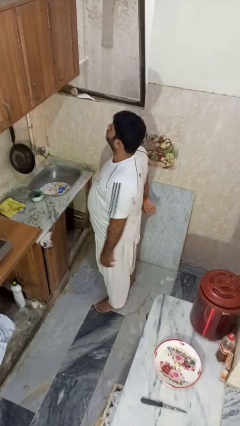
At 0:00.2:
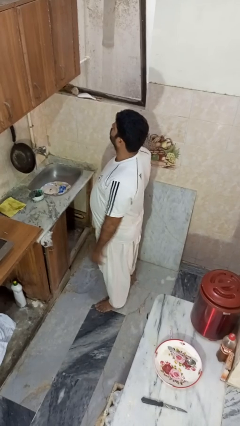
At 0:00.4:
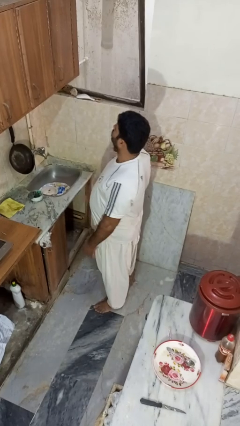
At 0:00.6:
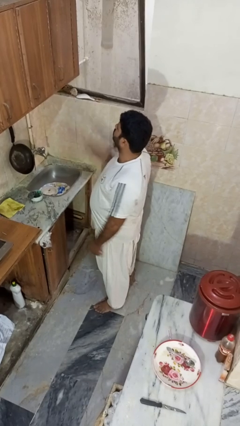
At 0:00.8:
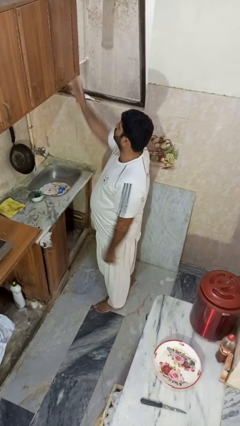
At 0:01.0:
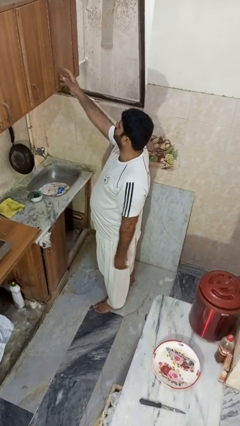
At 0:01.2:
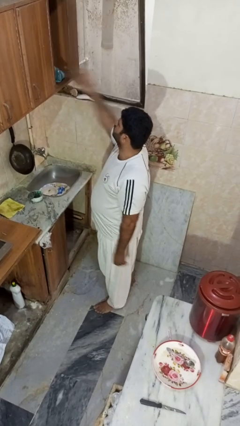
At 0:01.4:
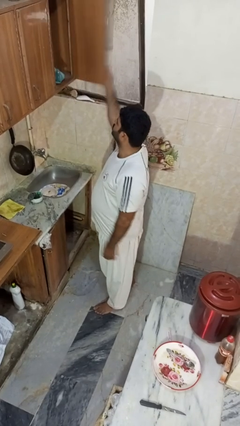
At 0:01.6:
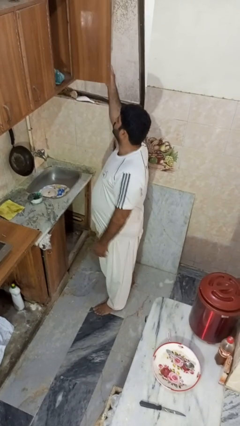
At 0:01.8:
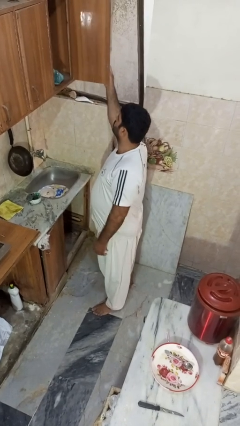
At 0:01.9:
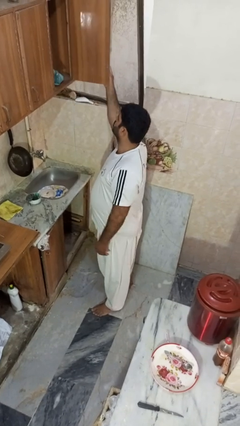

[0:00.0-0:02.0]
person opens cabinet

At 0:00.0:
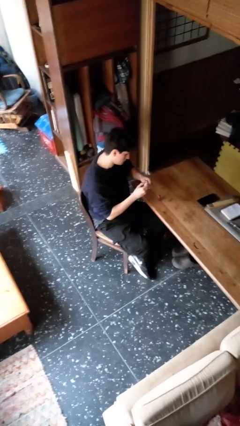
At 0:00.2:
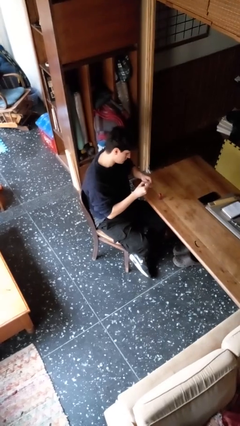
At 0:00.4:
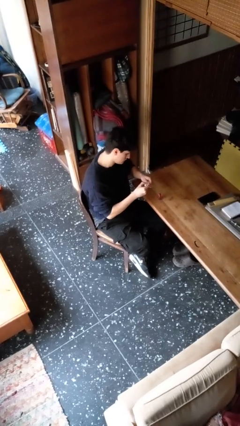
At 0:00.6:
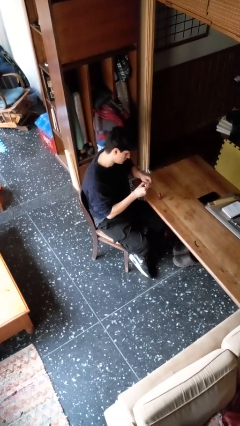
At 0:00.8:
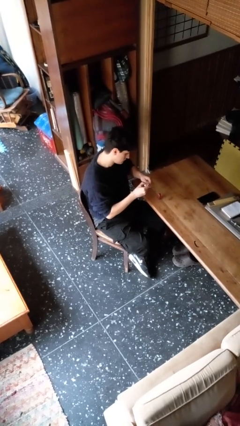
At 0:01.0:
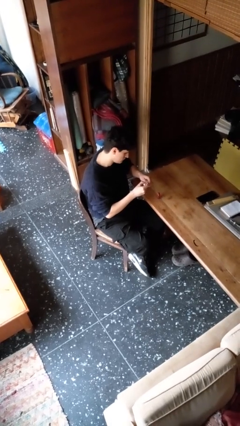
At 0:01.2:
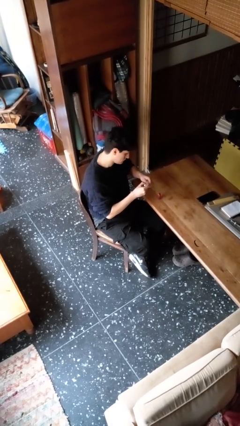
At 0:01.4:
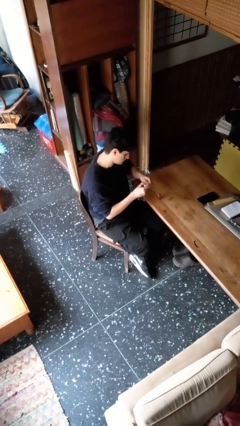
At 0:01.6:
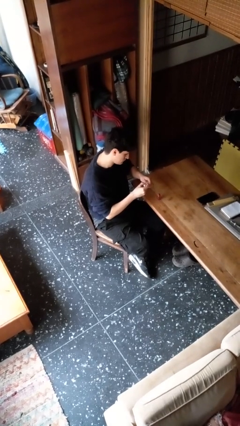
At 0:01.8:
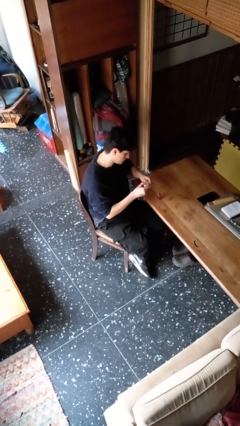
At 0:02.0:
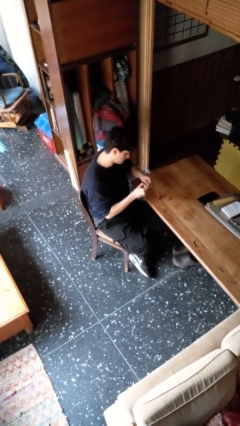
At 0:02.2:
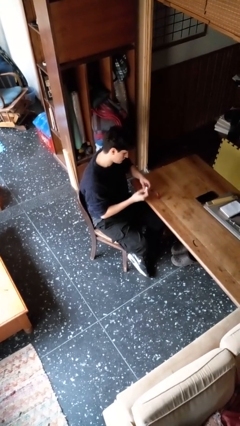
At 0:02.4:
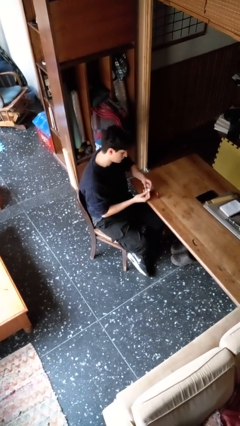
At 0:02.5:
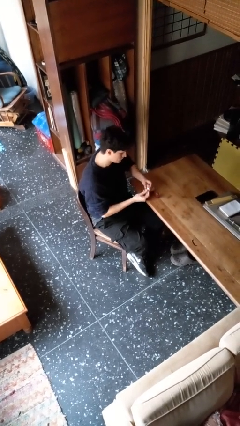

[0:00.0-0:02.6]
person paints fingernails

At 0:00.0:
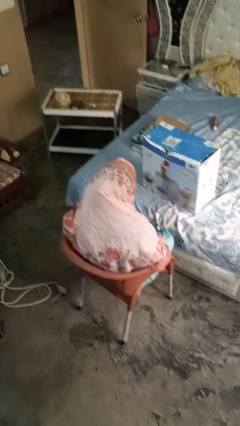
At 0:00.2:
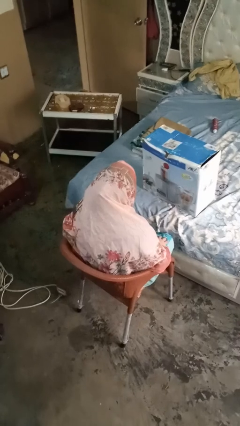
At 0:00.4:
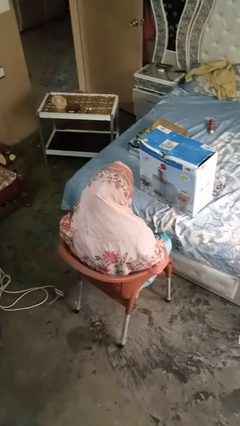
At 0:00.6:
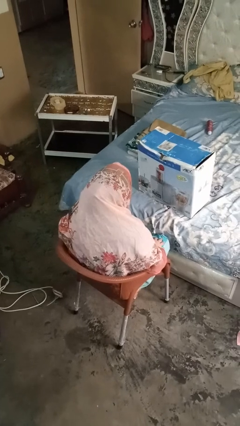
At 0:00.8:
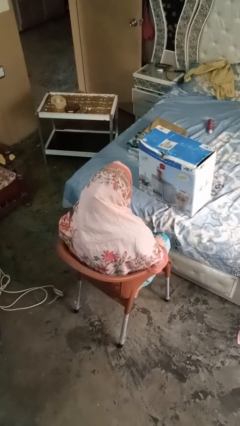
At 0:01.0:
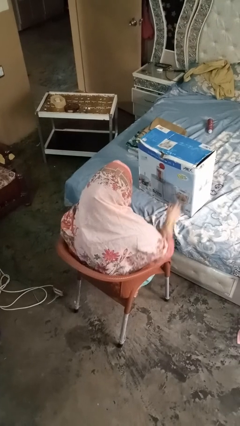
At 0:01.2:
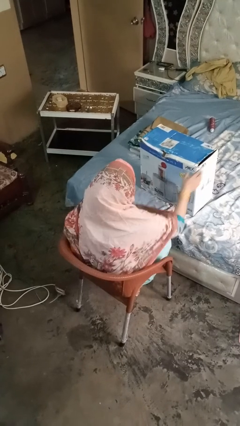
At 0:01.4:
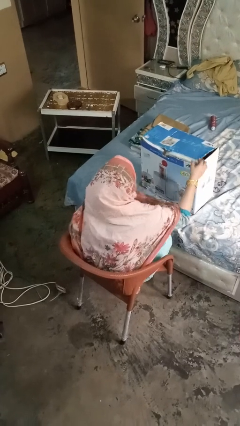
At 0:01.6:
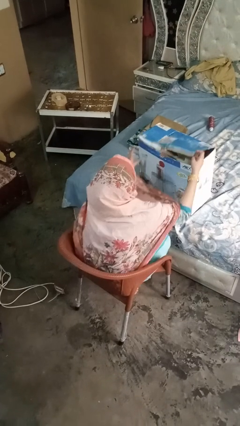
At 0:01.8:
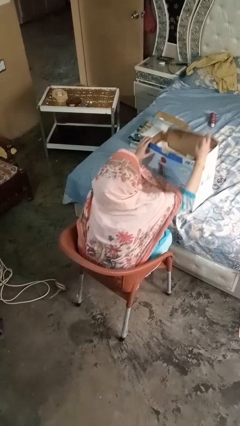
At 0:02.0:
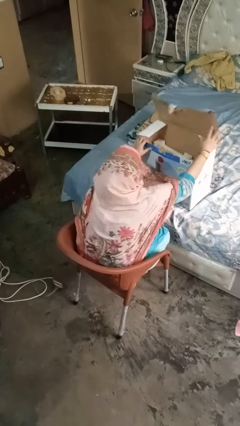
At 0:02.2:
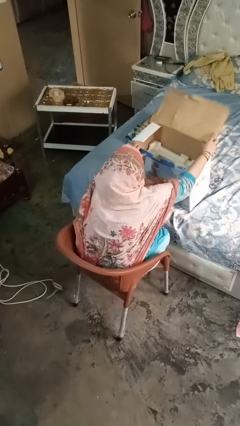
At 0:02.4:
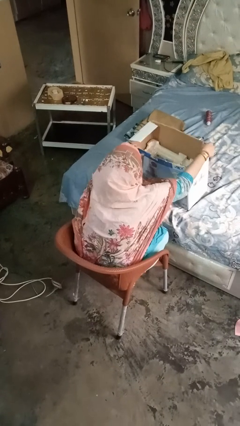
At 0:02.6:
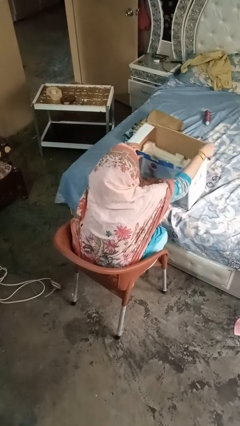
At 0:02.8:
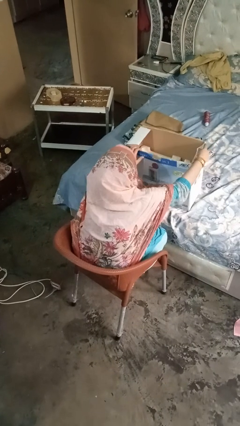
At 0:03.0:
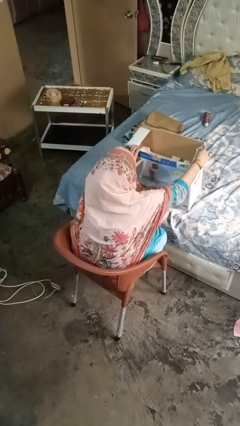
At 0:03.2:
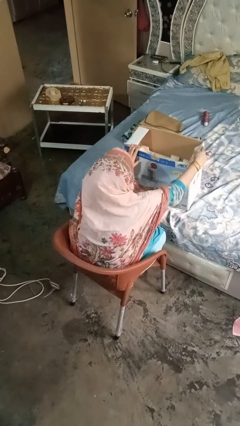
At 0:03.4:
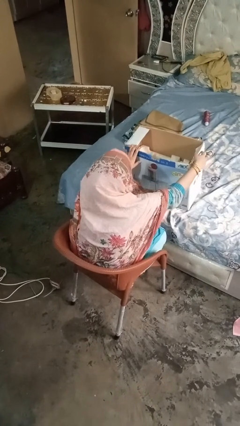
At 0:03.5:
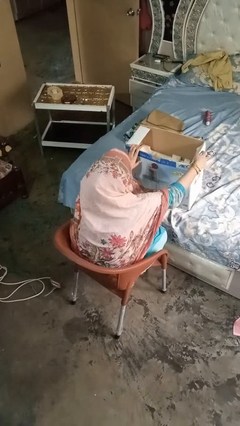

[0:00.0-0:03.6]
person opens box

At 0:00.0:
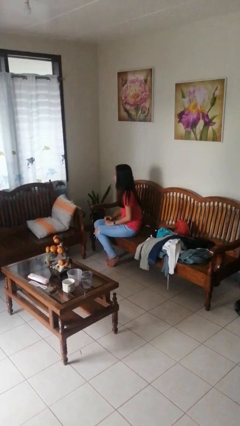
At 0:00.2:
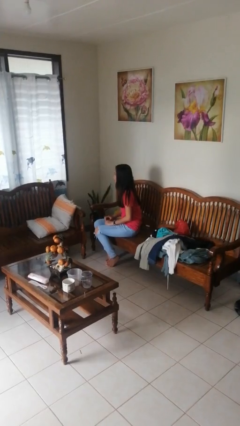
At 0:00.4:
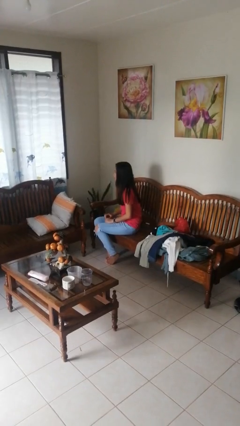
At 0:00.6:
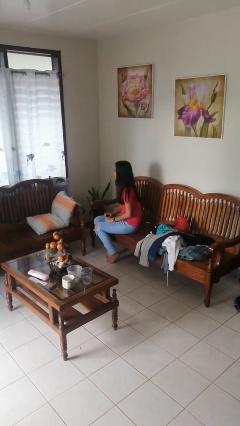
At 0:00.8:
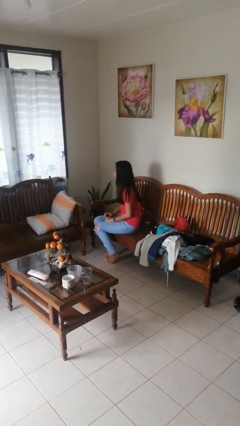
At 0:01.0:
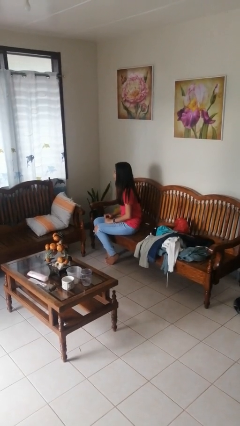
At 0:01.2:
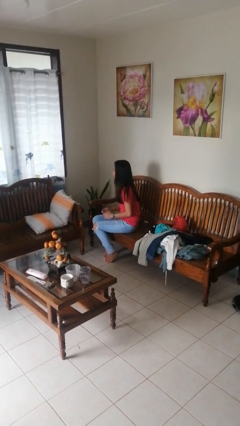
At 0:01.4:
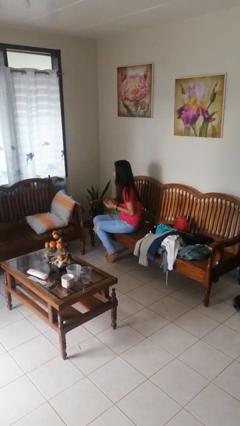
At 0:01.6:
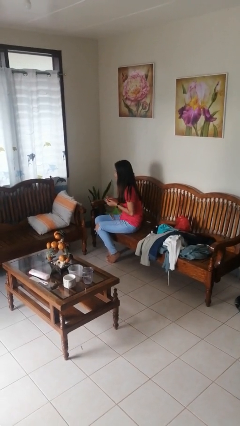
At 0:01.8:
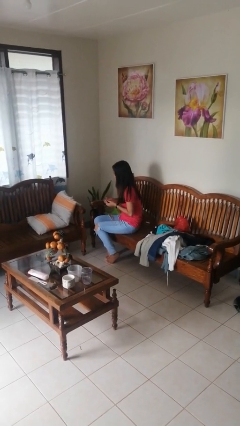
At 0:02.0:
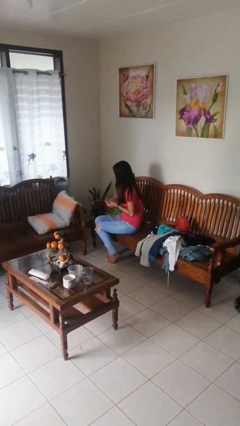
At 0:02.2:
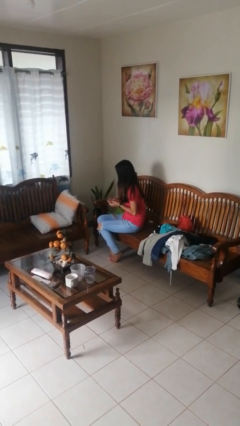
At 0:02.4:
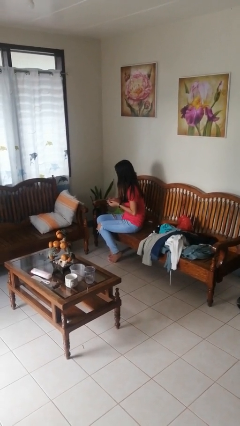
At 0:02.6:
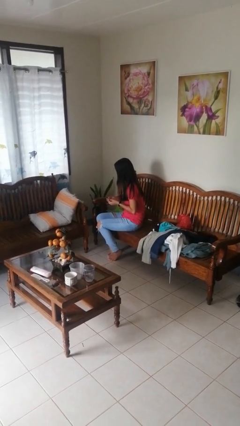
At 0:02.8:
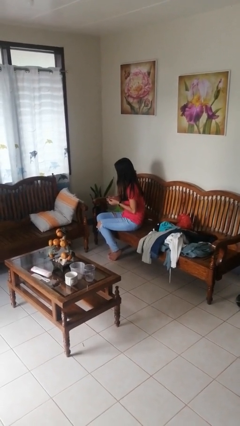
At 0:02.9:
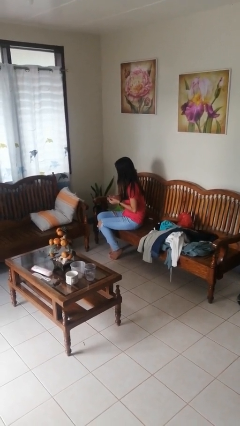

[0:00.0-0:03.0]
person clips fingernails

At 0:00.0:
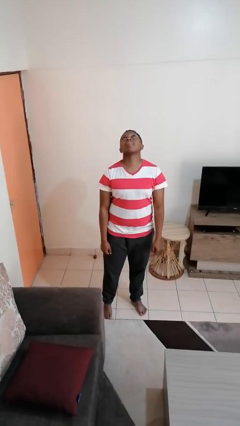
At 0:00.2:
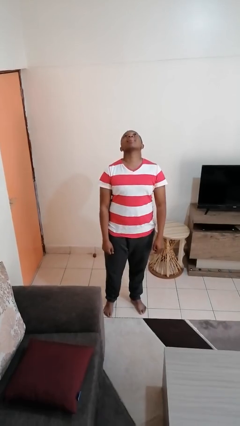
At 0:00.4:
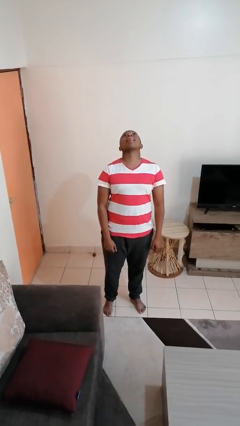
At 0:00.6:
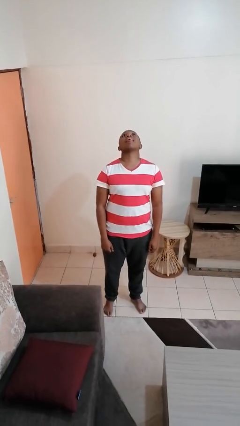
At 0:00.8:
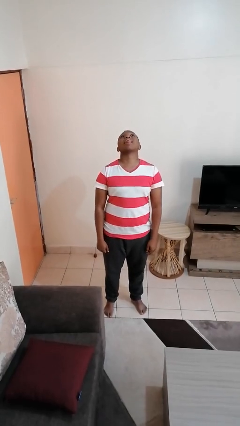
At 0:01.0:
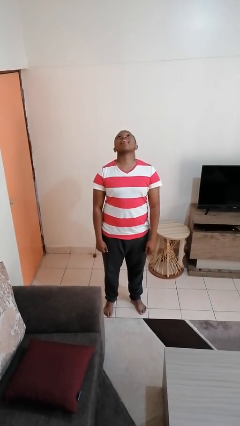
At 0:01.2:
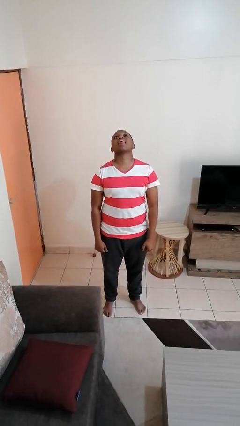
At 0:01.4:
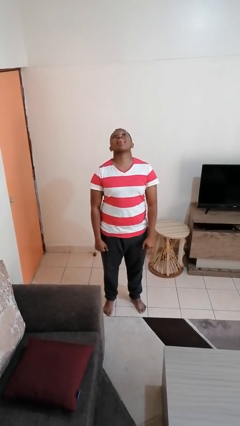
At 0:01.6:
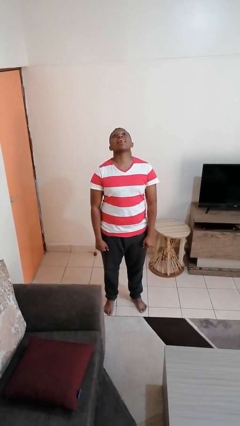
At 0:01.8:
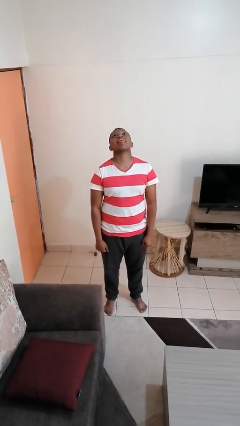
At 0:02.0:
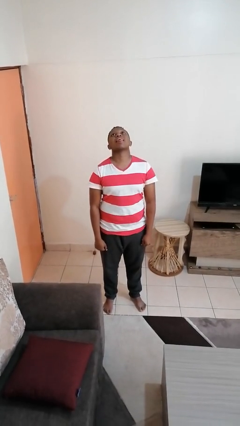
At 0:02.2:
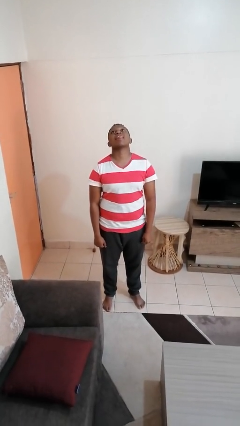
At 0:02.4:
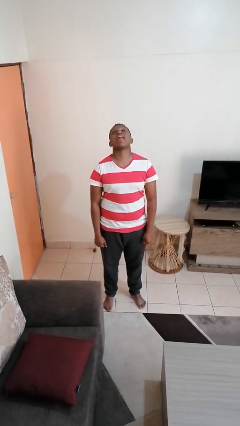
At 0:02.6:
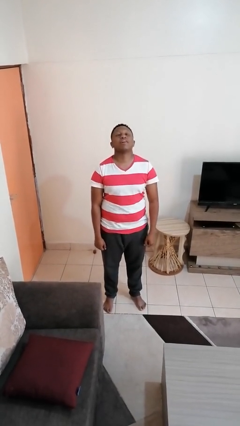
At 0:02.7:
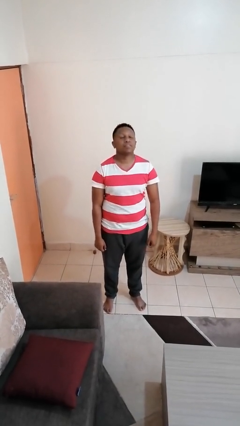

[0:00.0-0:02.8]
person sticks out tongue

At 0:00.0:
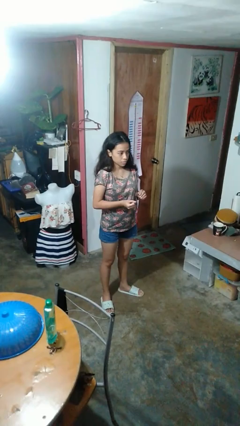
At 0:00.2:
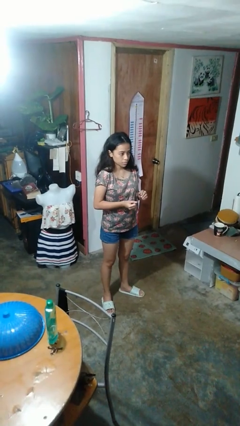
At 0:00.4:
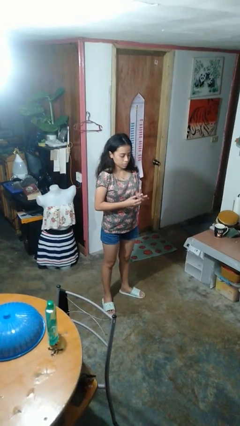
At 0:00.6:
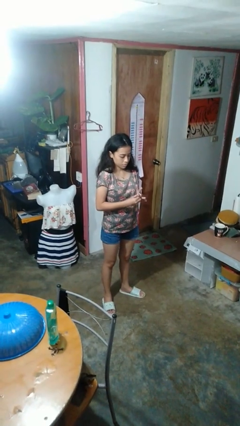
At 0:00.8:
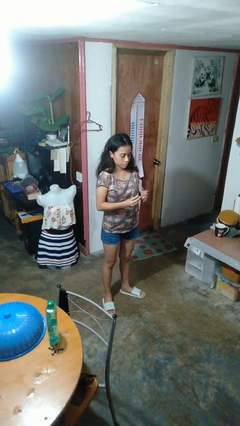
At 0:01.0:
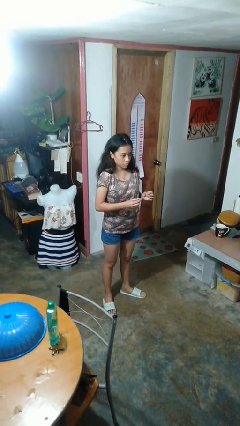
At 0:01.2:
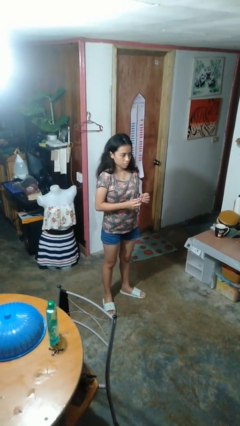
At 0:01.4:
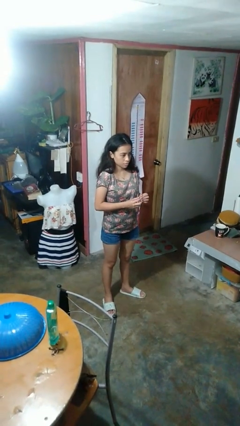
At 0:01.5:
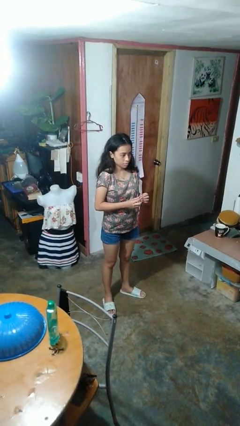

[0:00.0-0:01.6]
person takes off ring

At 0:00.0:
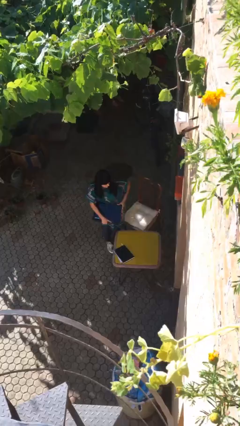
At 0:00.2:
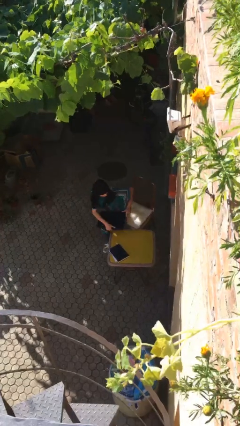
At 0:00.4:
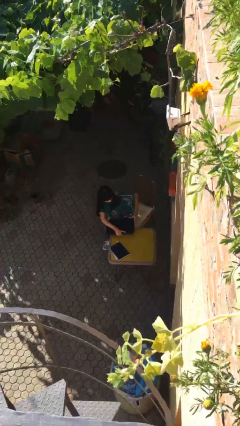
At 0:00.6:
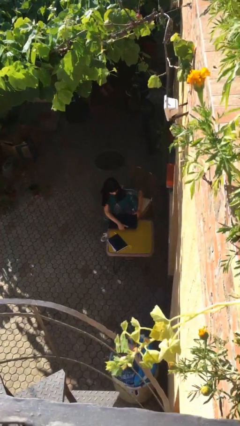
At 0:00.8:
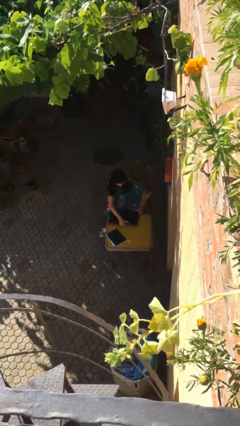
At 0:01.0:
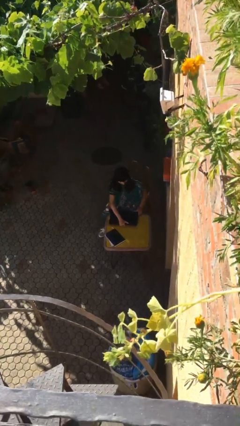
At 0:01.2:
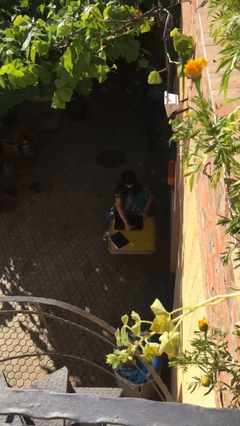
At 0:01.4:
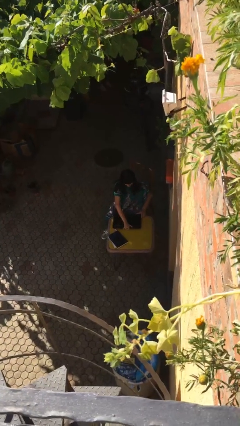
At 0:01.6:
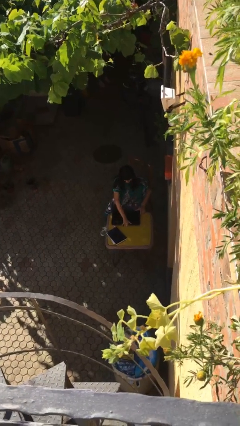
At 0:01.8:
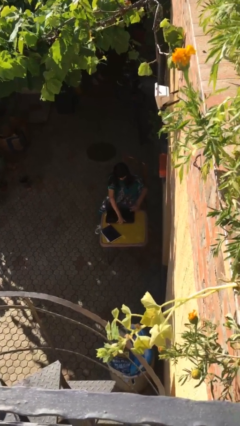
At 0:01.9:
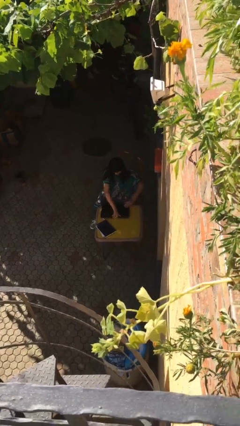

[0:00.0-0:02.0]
person sits down
